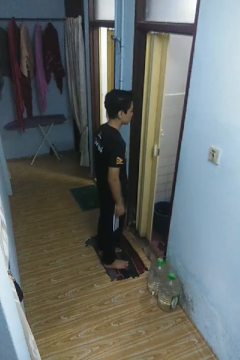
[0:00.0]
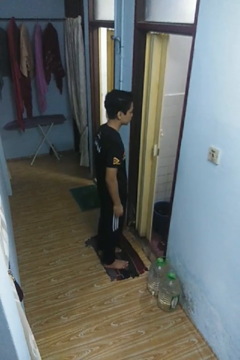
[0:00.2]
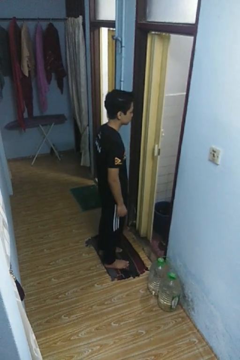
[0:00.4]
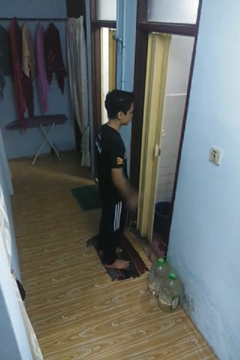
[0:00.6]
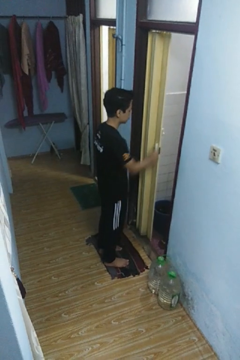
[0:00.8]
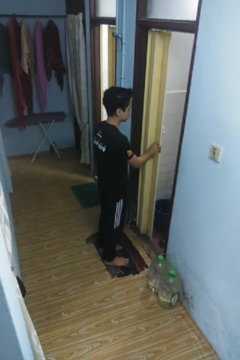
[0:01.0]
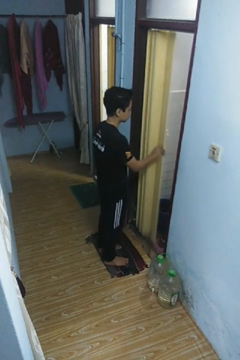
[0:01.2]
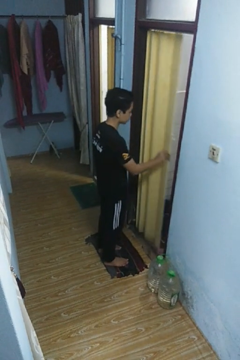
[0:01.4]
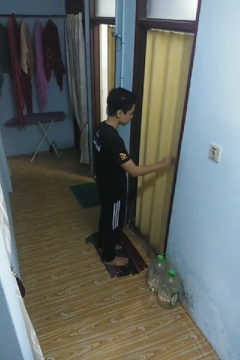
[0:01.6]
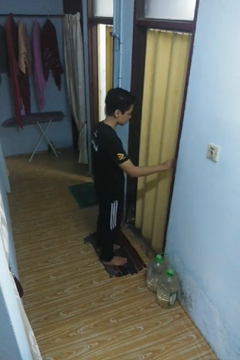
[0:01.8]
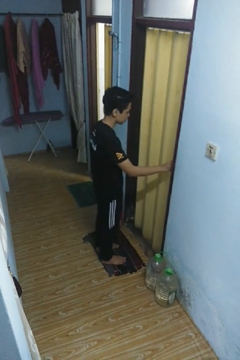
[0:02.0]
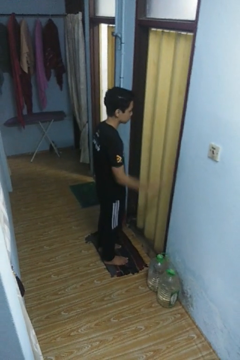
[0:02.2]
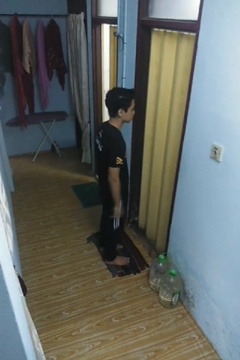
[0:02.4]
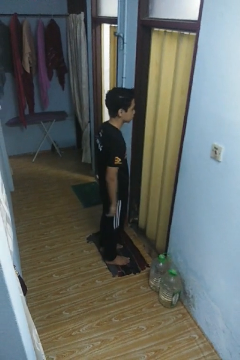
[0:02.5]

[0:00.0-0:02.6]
person closes sliding door

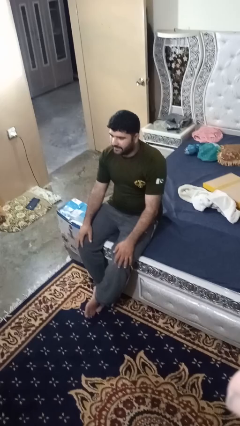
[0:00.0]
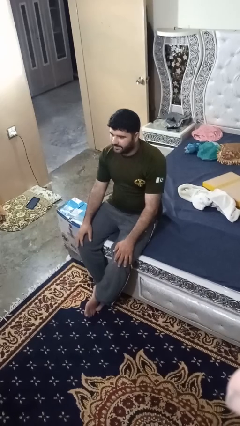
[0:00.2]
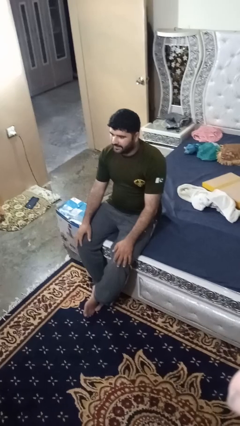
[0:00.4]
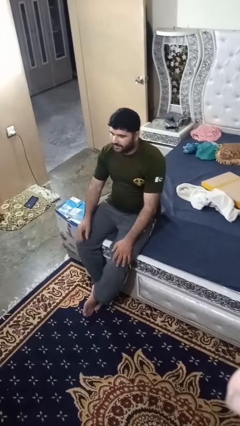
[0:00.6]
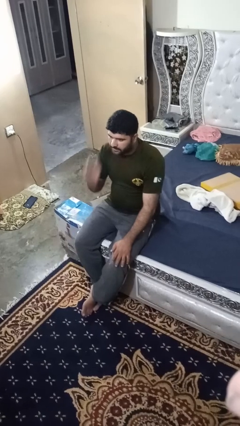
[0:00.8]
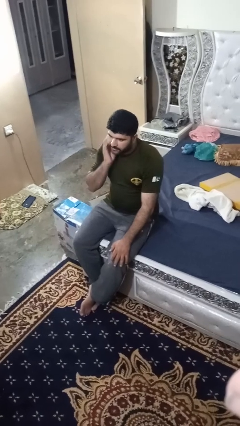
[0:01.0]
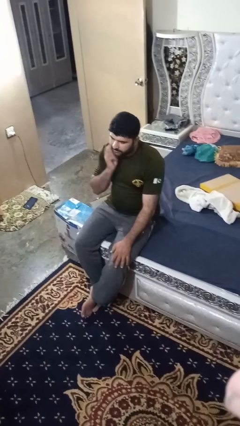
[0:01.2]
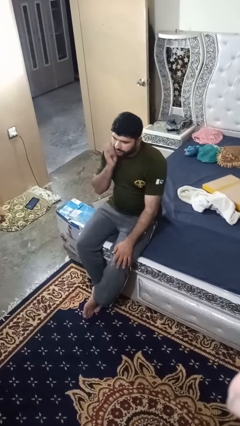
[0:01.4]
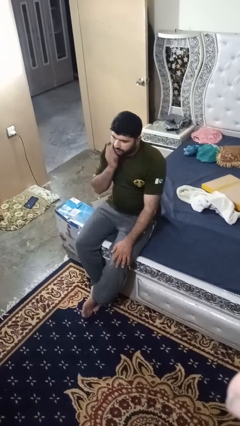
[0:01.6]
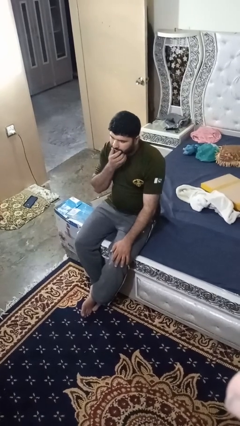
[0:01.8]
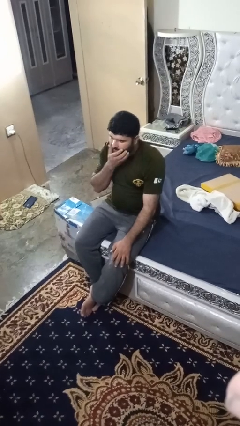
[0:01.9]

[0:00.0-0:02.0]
person strokes chin

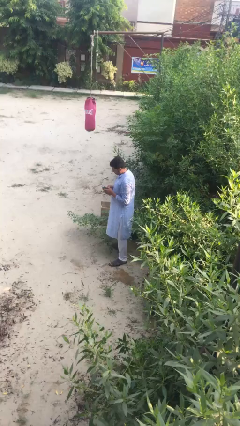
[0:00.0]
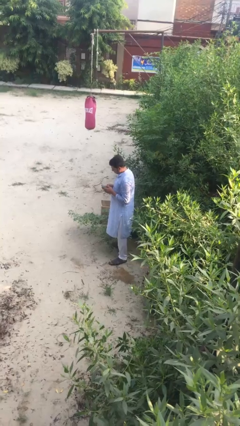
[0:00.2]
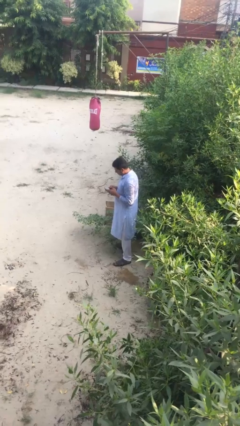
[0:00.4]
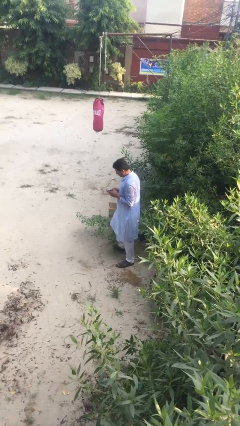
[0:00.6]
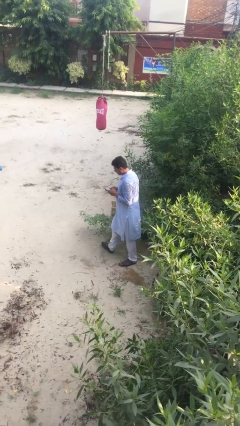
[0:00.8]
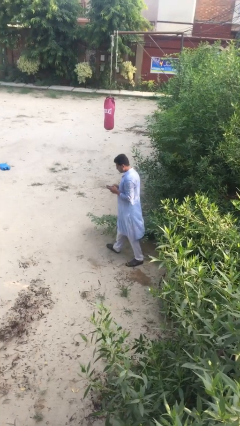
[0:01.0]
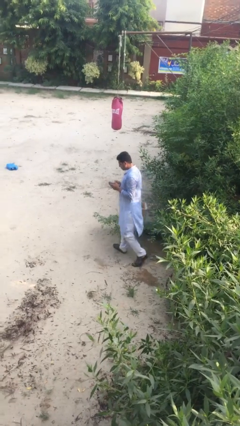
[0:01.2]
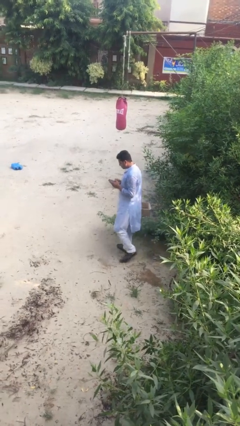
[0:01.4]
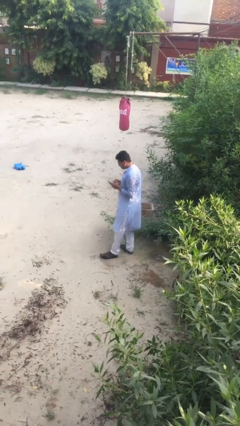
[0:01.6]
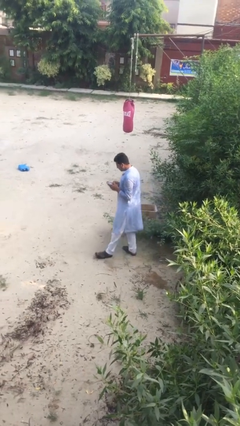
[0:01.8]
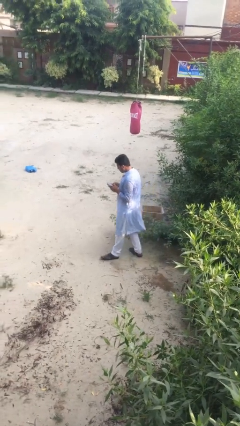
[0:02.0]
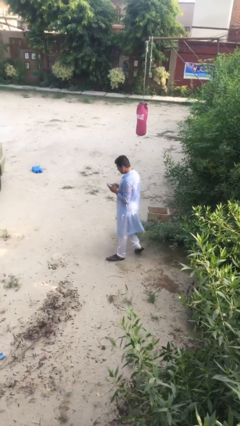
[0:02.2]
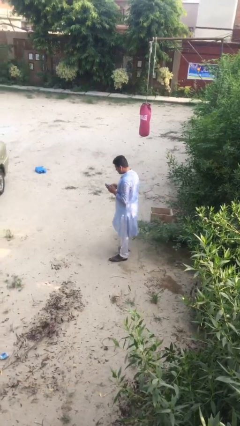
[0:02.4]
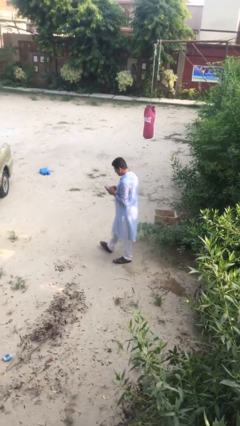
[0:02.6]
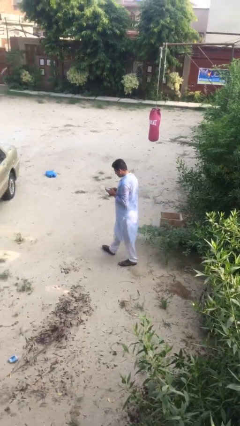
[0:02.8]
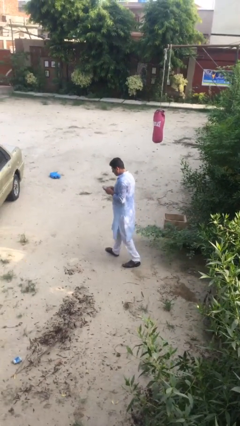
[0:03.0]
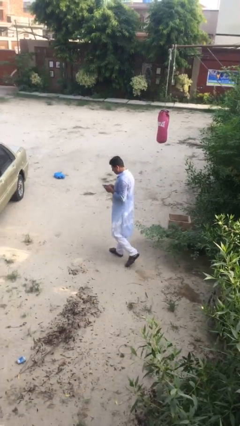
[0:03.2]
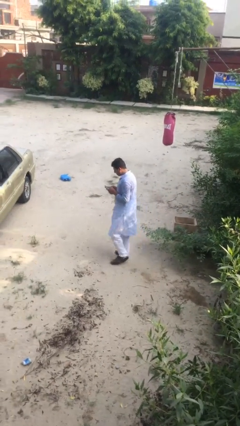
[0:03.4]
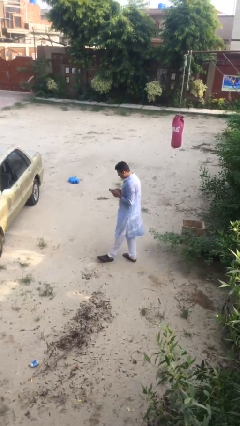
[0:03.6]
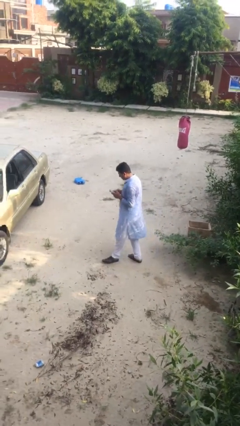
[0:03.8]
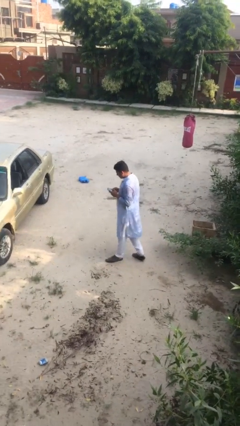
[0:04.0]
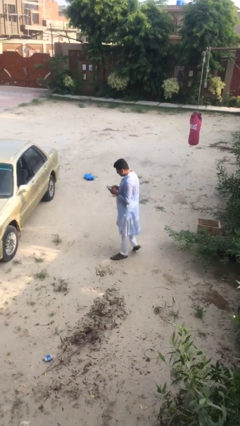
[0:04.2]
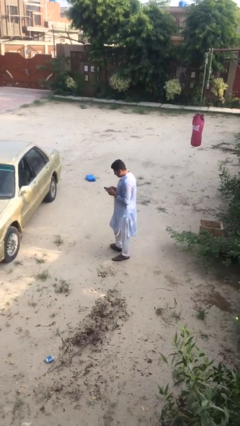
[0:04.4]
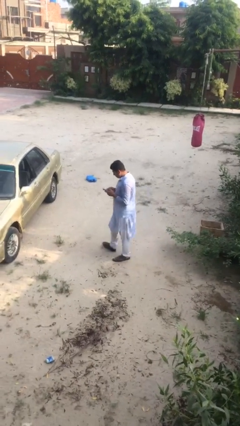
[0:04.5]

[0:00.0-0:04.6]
person texts on phone

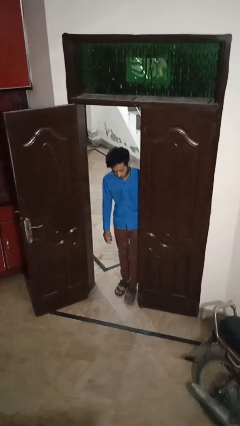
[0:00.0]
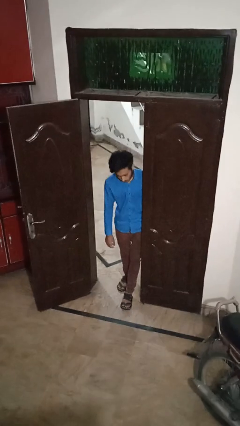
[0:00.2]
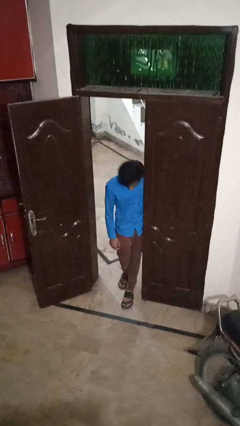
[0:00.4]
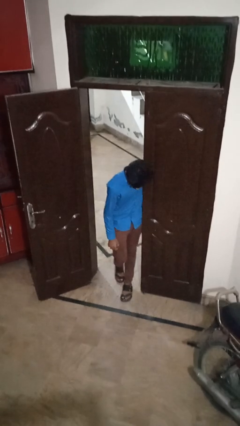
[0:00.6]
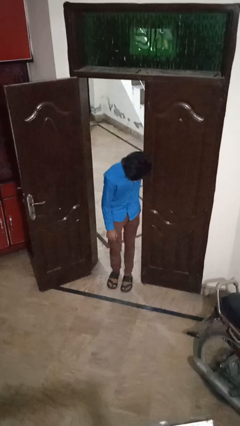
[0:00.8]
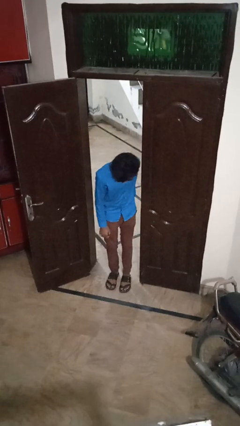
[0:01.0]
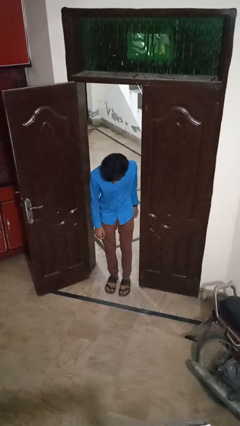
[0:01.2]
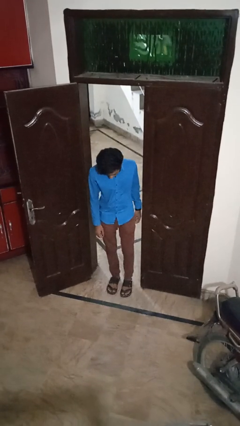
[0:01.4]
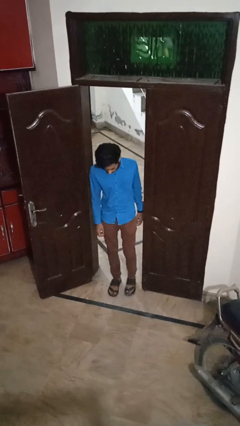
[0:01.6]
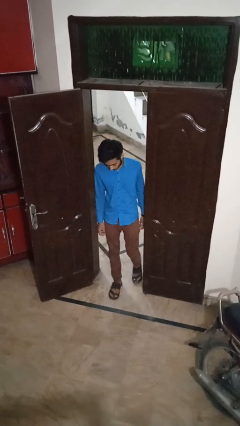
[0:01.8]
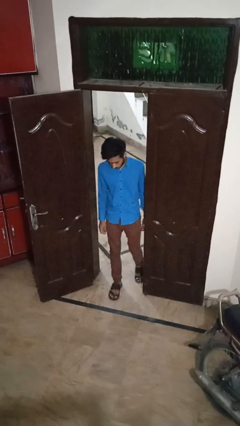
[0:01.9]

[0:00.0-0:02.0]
person bumps into wall

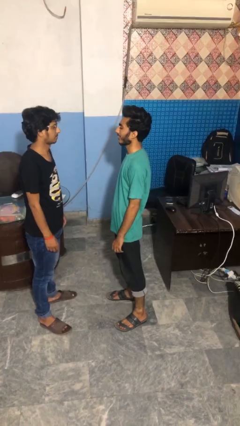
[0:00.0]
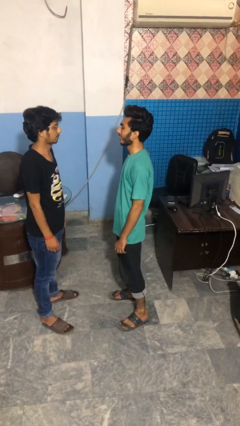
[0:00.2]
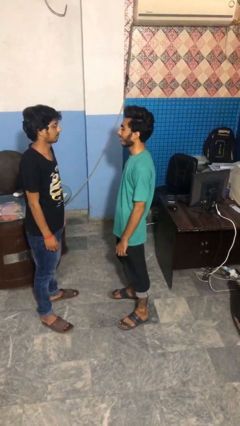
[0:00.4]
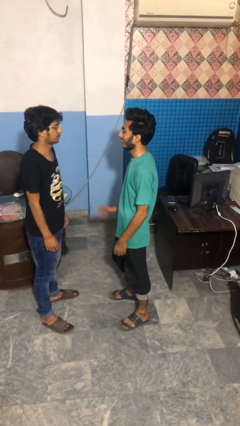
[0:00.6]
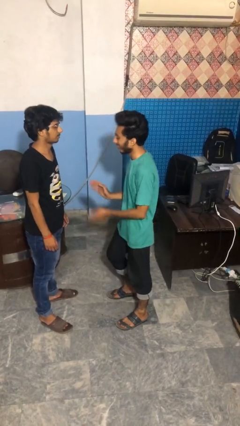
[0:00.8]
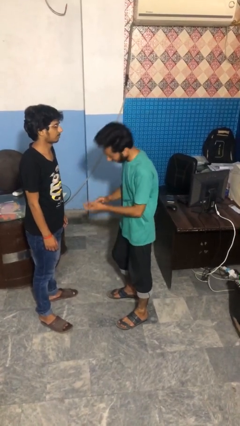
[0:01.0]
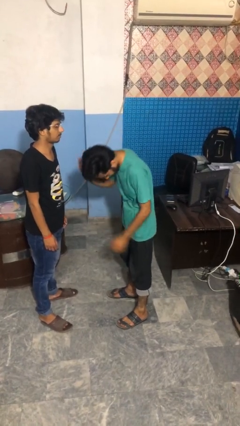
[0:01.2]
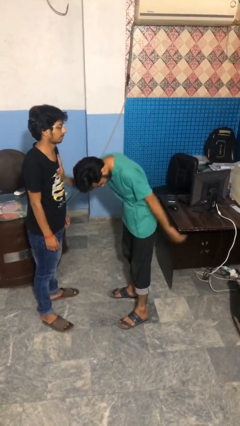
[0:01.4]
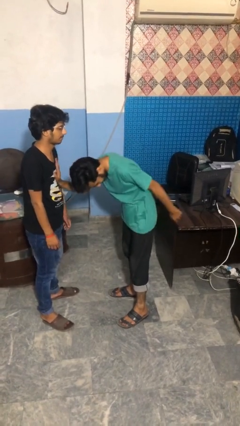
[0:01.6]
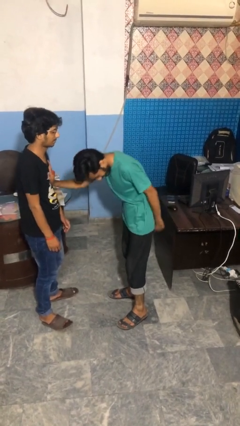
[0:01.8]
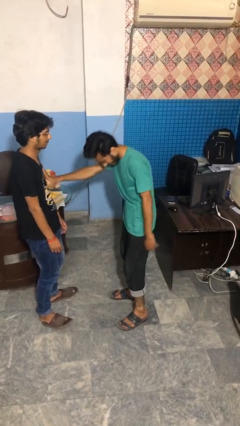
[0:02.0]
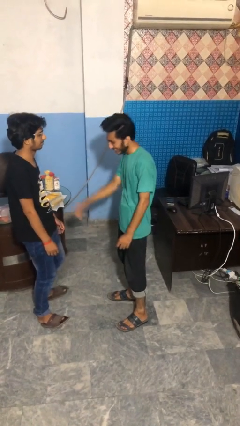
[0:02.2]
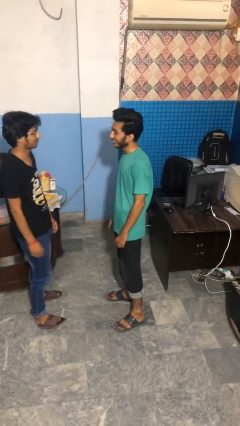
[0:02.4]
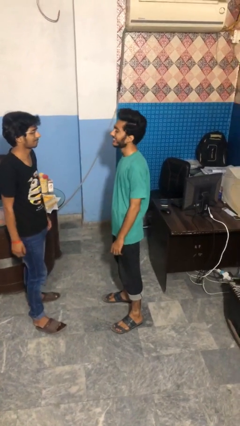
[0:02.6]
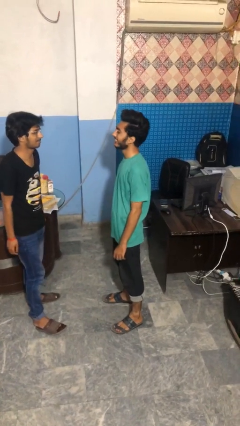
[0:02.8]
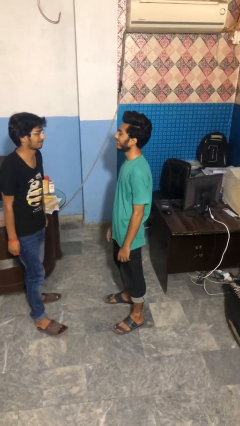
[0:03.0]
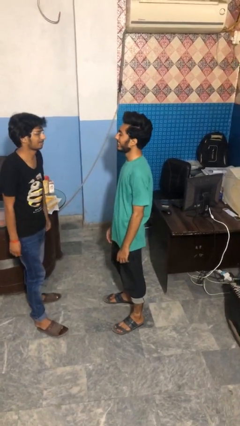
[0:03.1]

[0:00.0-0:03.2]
person shoves person

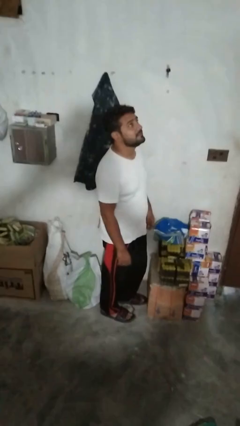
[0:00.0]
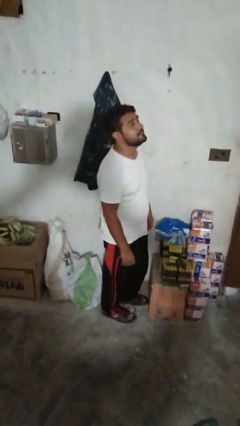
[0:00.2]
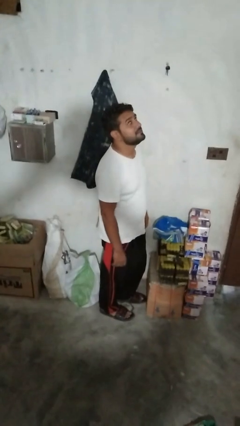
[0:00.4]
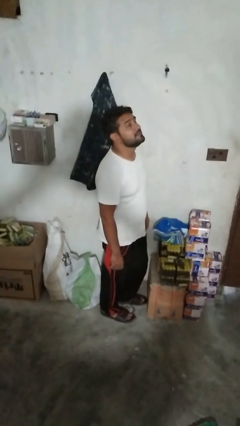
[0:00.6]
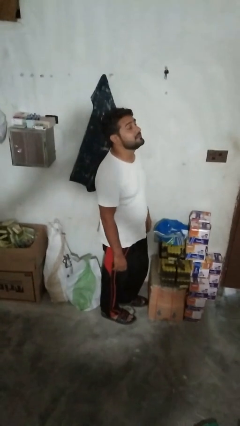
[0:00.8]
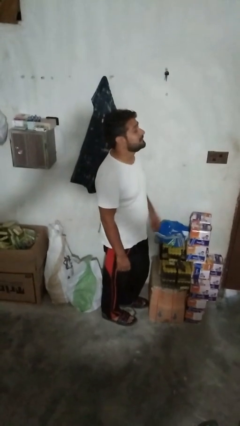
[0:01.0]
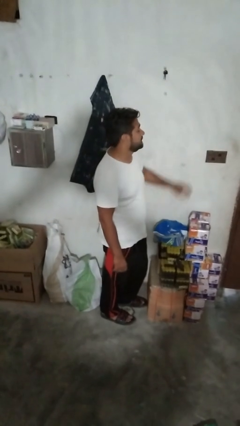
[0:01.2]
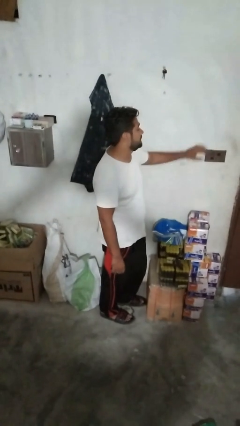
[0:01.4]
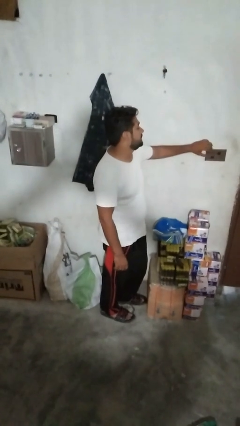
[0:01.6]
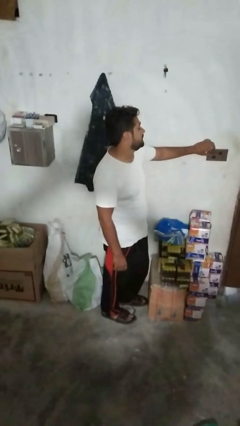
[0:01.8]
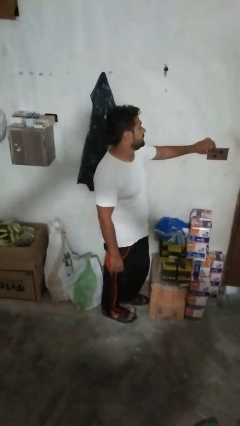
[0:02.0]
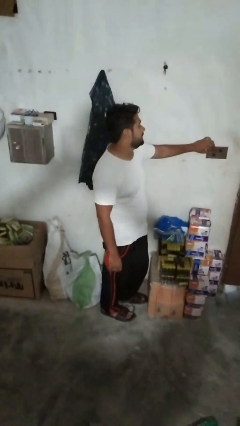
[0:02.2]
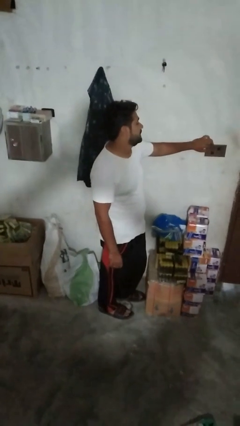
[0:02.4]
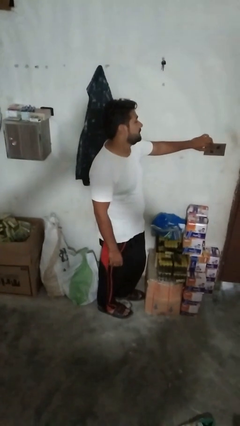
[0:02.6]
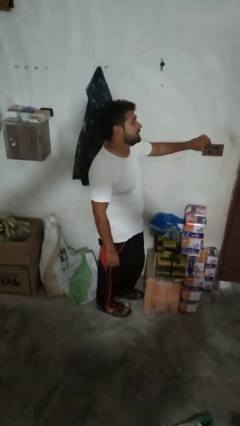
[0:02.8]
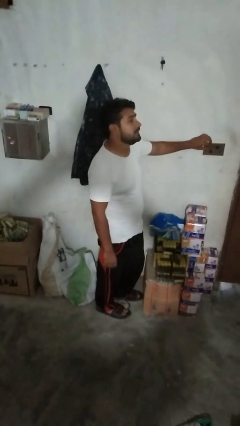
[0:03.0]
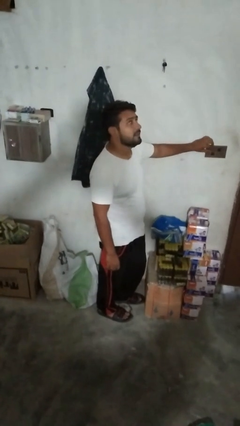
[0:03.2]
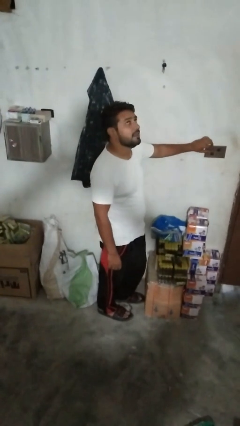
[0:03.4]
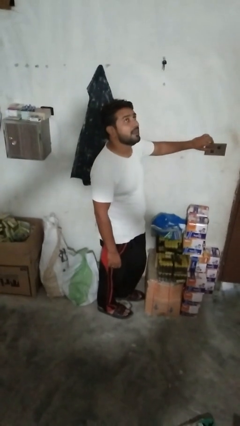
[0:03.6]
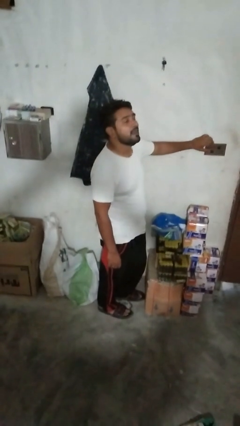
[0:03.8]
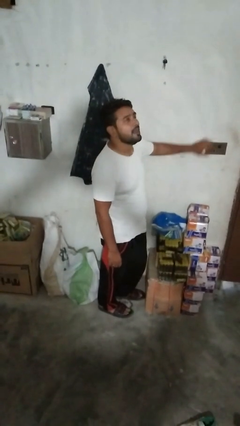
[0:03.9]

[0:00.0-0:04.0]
person adjusts thermostat
